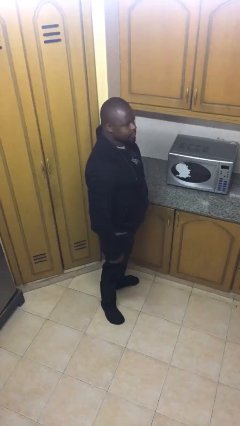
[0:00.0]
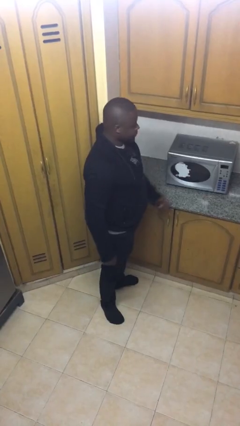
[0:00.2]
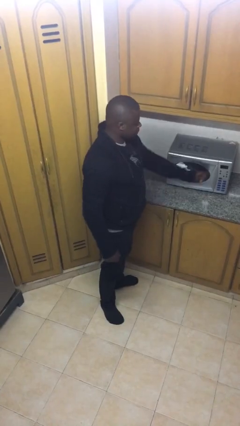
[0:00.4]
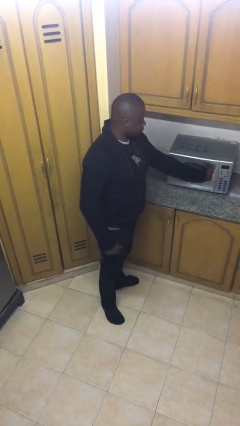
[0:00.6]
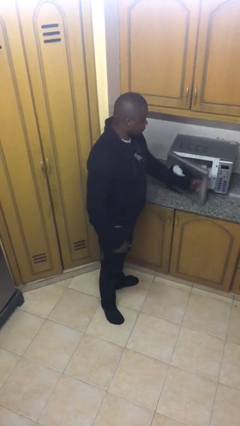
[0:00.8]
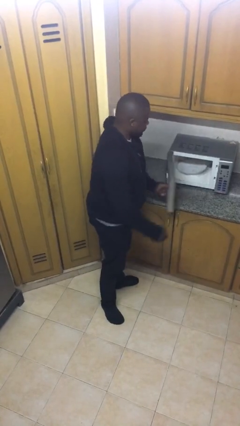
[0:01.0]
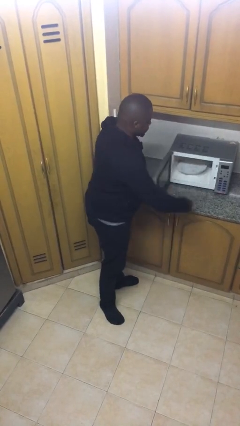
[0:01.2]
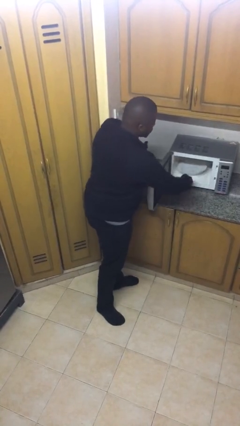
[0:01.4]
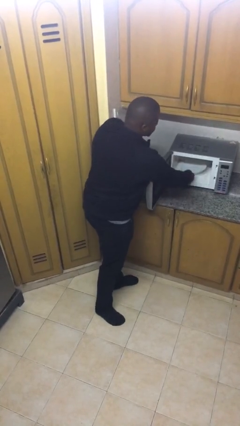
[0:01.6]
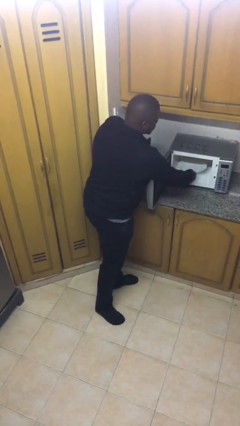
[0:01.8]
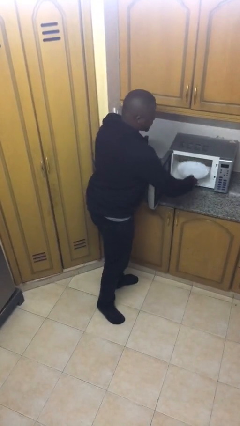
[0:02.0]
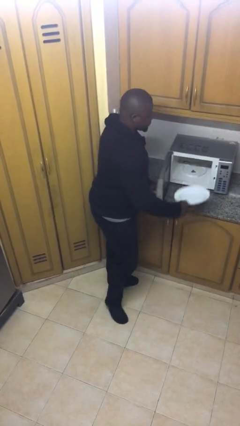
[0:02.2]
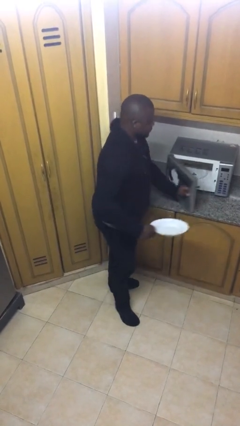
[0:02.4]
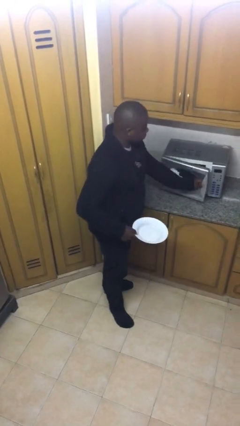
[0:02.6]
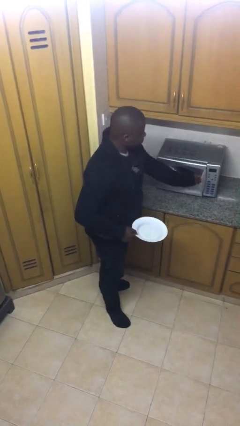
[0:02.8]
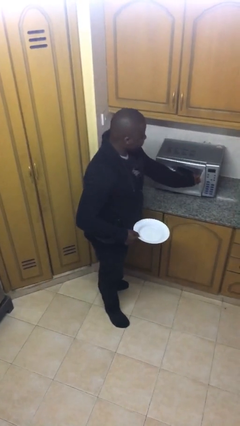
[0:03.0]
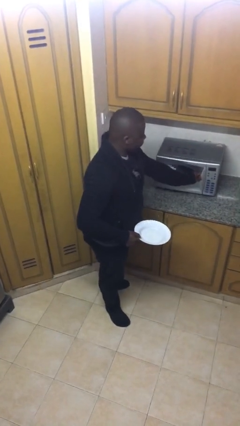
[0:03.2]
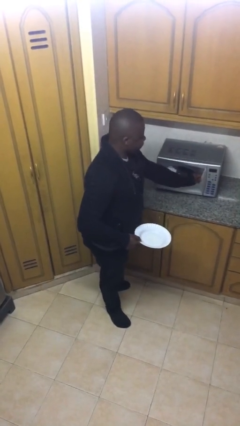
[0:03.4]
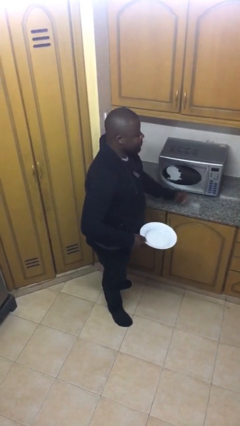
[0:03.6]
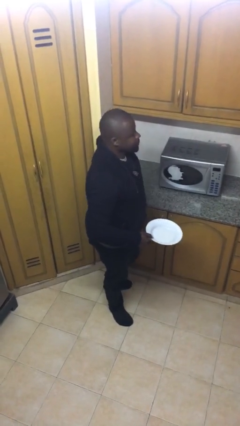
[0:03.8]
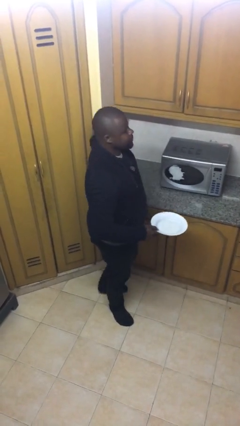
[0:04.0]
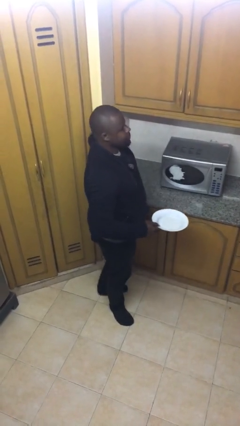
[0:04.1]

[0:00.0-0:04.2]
person takes object from microwave

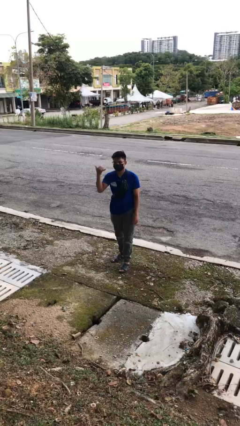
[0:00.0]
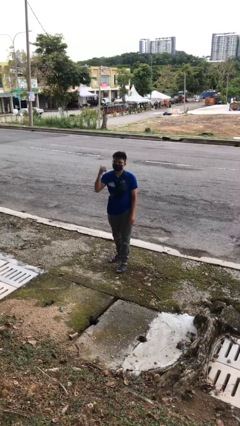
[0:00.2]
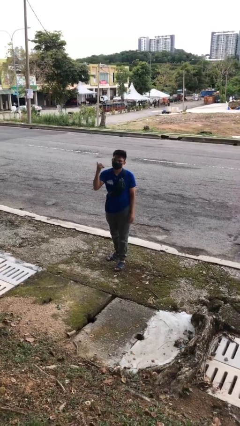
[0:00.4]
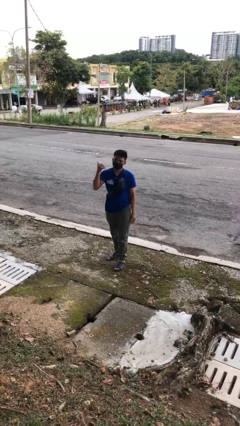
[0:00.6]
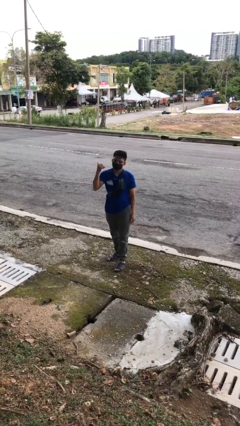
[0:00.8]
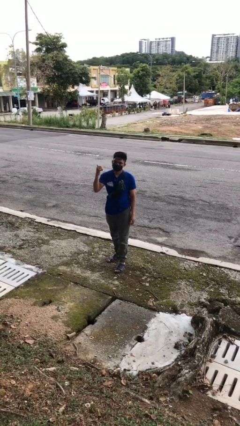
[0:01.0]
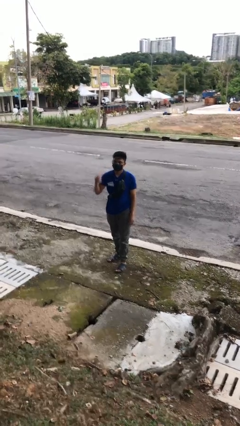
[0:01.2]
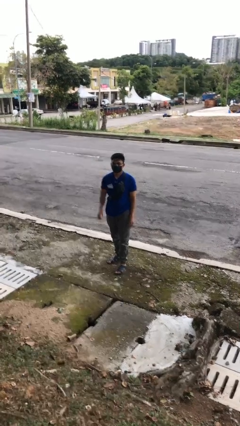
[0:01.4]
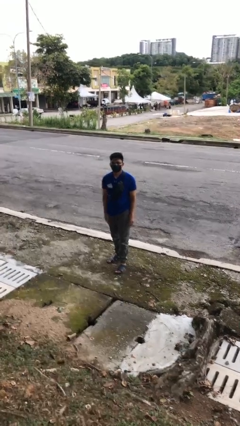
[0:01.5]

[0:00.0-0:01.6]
person gestures hang loose

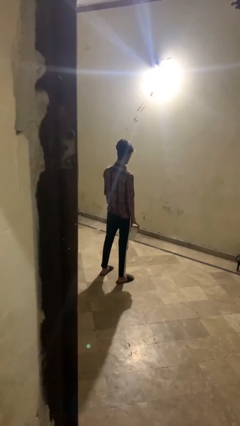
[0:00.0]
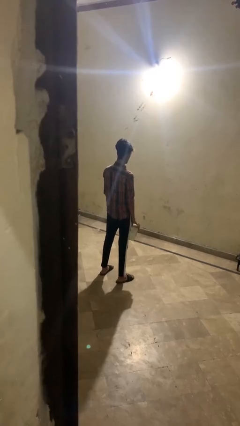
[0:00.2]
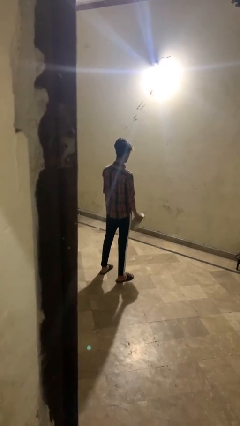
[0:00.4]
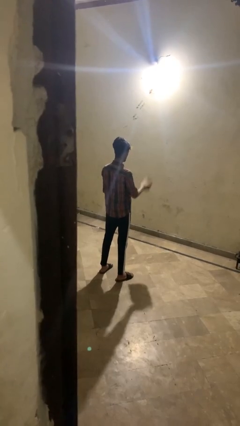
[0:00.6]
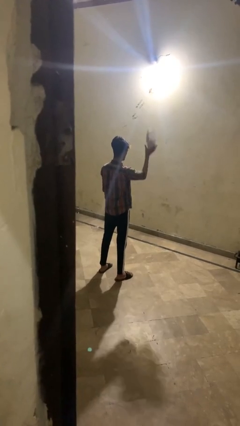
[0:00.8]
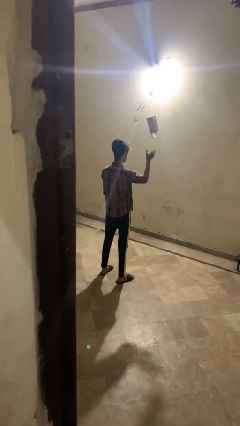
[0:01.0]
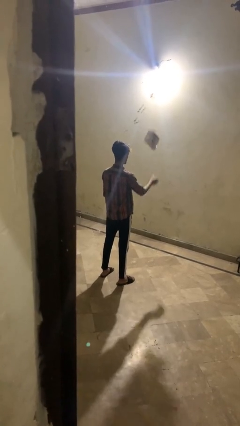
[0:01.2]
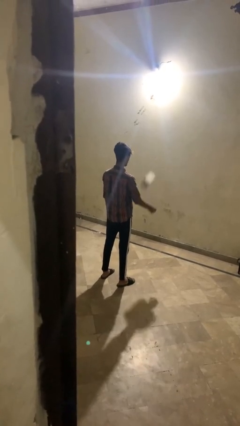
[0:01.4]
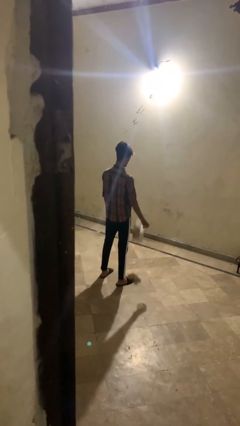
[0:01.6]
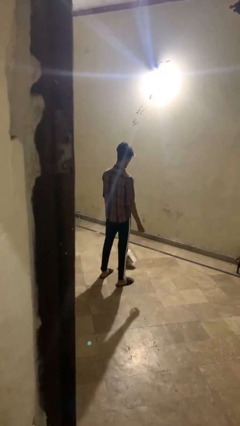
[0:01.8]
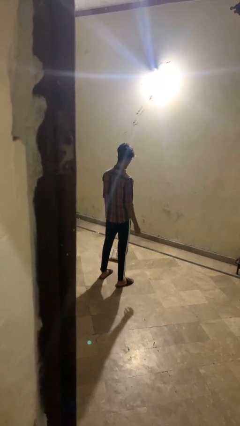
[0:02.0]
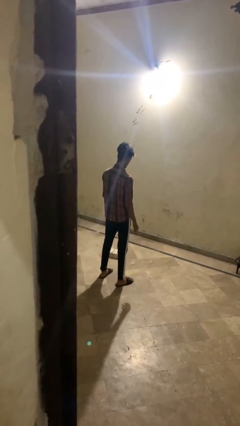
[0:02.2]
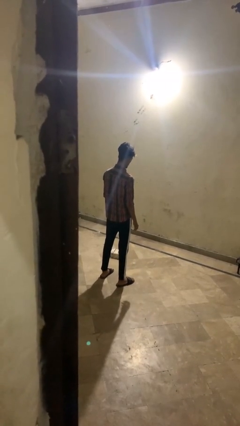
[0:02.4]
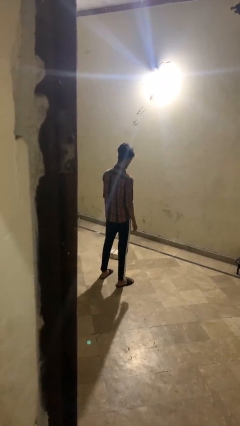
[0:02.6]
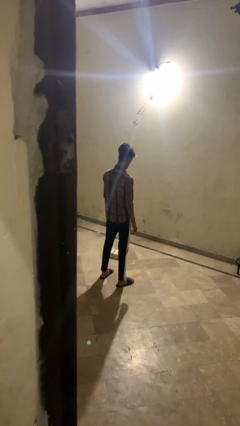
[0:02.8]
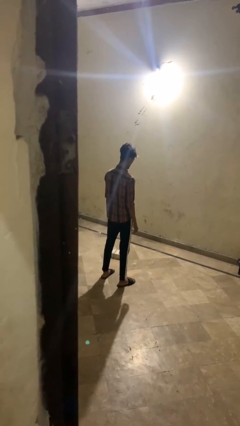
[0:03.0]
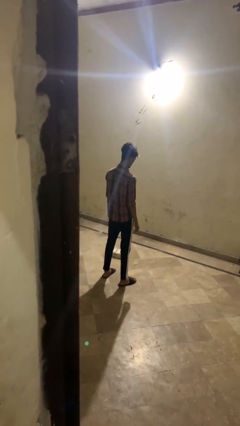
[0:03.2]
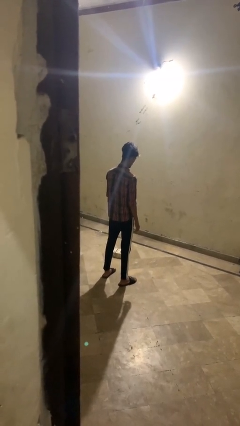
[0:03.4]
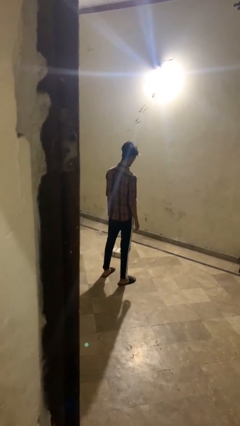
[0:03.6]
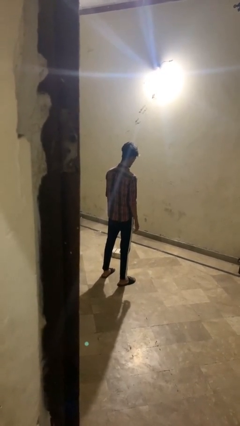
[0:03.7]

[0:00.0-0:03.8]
person throws object into air

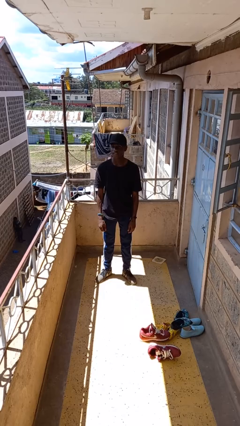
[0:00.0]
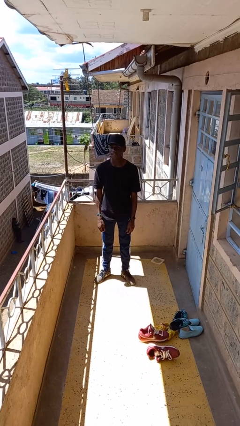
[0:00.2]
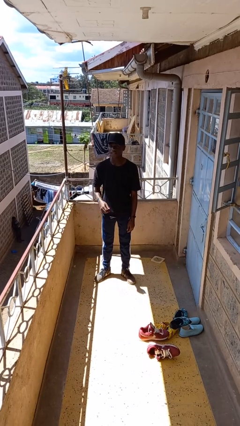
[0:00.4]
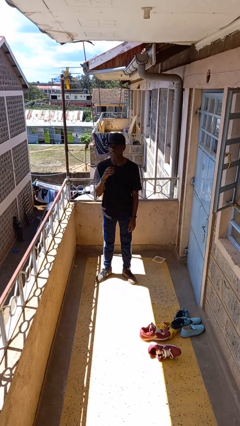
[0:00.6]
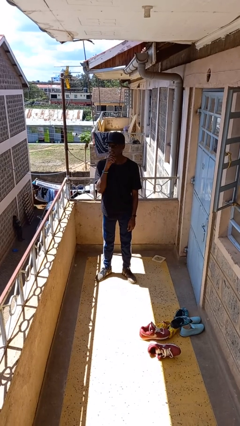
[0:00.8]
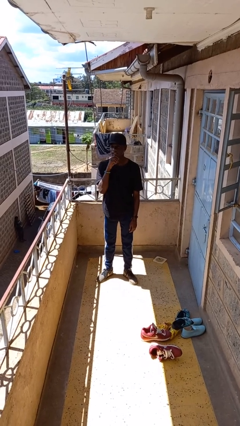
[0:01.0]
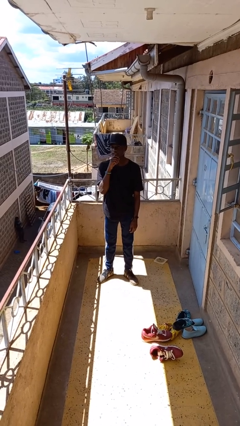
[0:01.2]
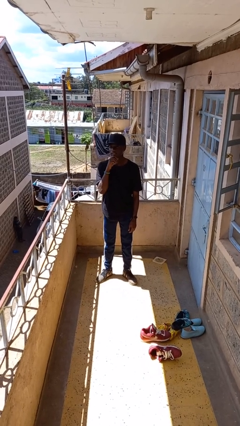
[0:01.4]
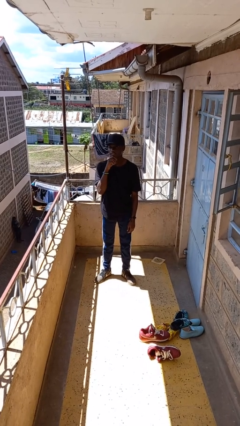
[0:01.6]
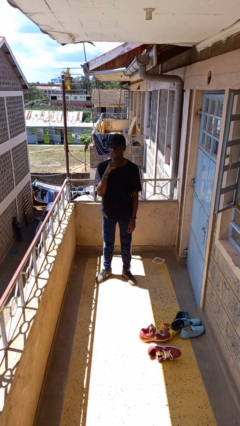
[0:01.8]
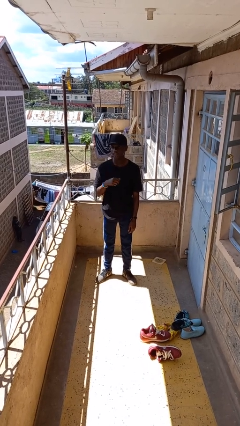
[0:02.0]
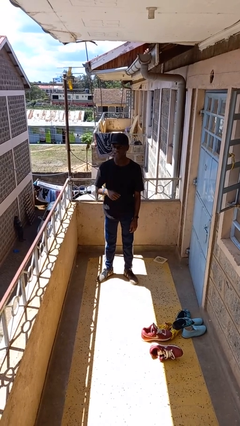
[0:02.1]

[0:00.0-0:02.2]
person strokes chin

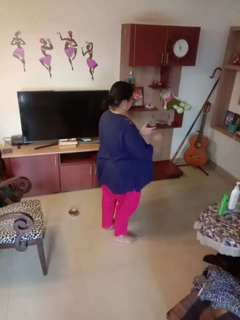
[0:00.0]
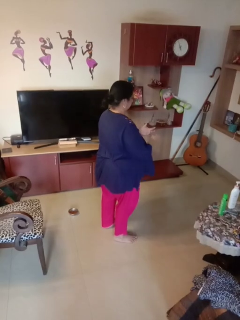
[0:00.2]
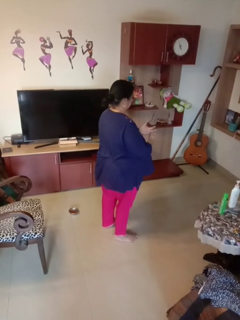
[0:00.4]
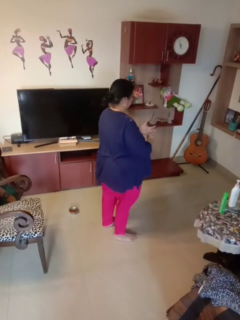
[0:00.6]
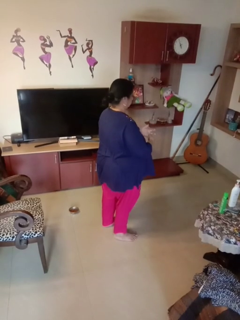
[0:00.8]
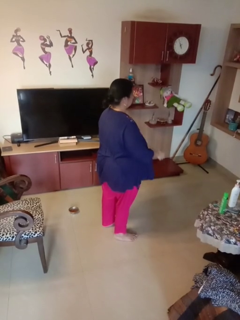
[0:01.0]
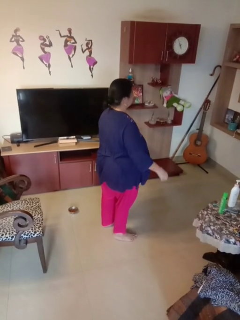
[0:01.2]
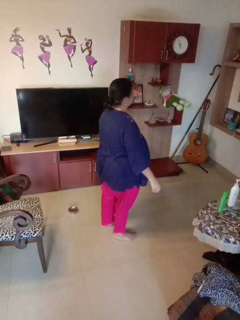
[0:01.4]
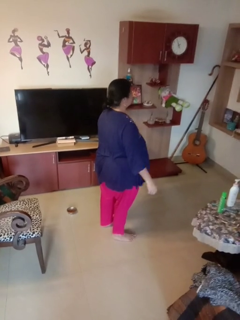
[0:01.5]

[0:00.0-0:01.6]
person puts on ring

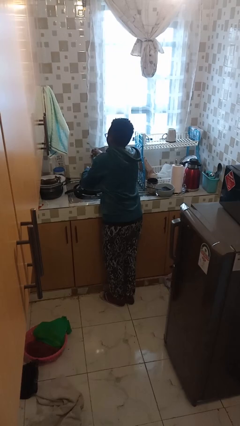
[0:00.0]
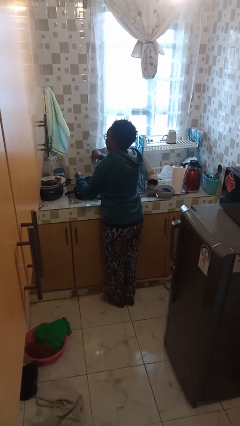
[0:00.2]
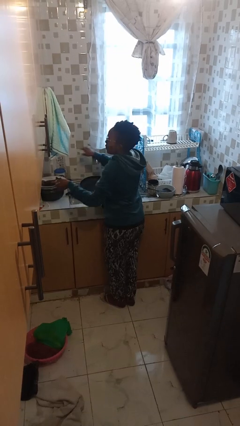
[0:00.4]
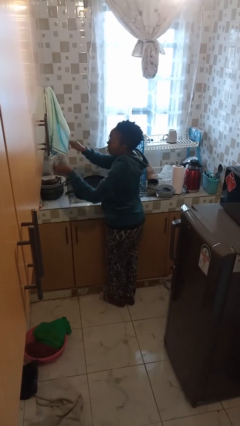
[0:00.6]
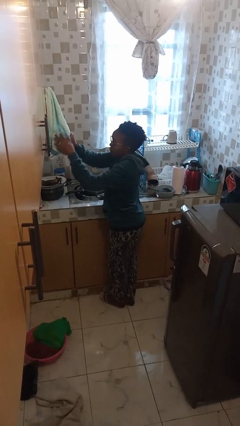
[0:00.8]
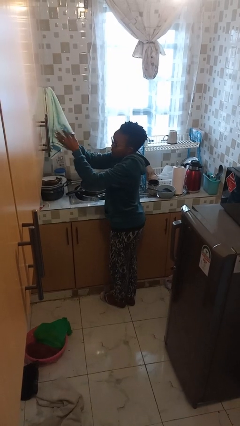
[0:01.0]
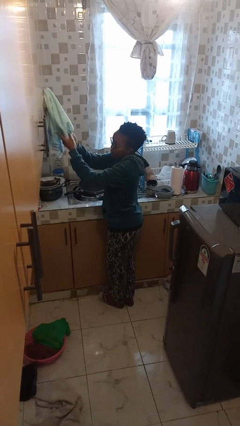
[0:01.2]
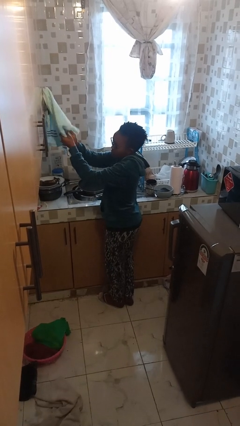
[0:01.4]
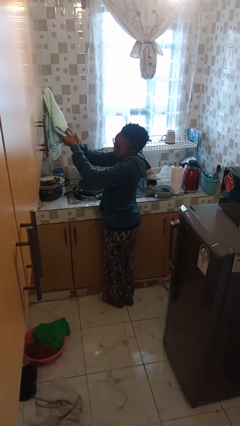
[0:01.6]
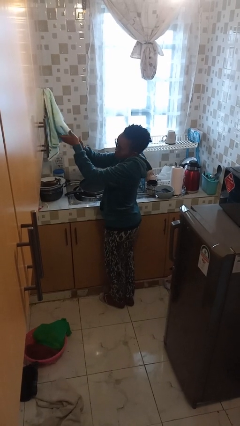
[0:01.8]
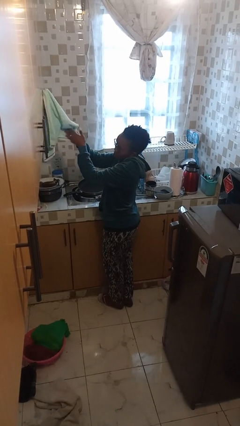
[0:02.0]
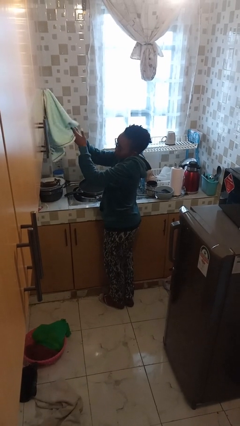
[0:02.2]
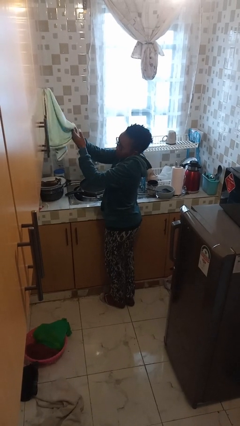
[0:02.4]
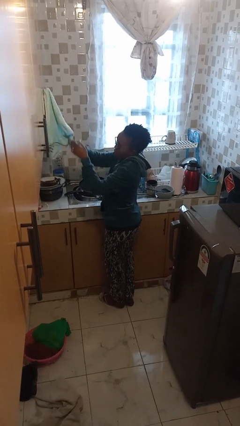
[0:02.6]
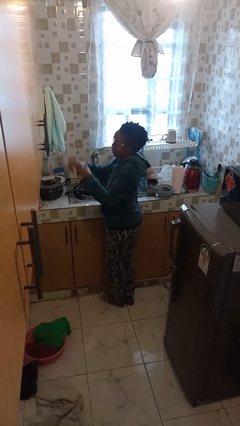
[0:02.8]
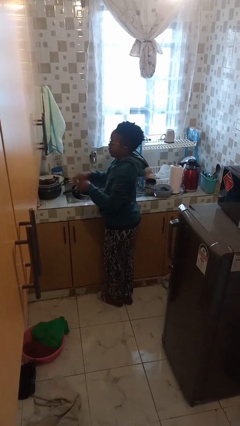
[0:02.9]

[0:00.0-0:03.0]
person dries hands with towel

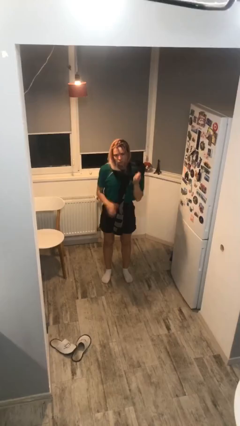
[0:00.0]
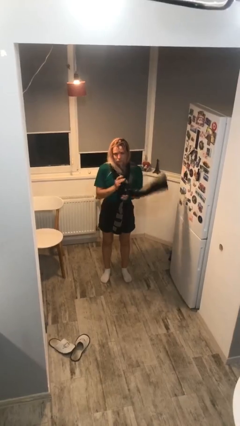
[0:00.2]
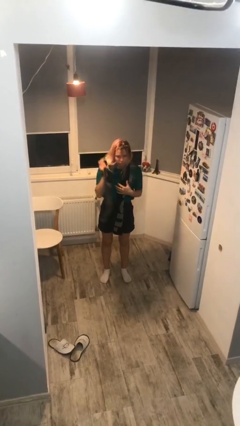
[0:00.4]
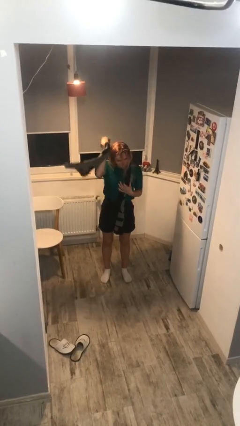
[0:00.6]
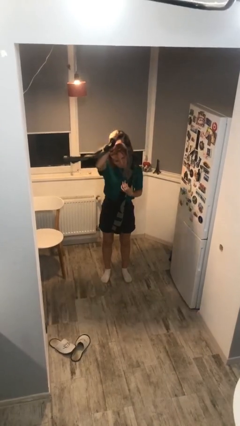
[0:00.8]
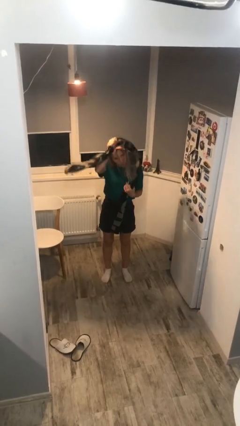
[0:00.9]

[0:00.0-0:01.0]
person takes off scarf

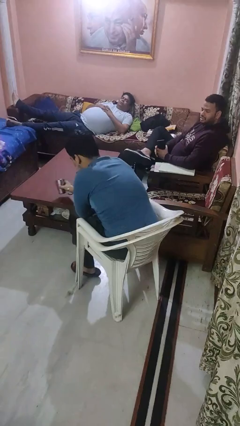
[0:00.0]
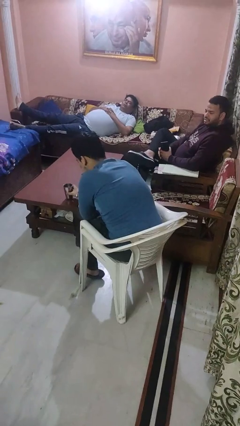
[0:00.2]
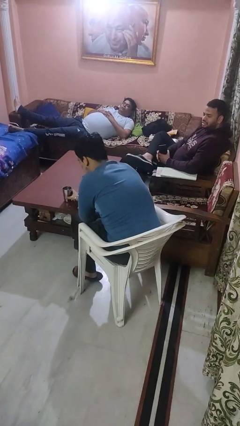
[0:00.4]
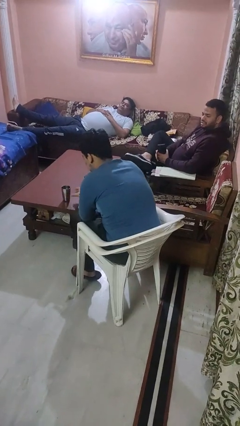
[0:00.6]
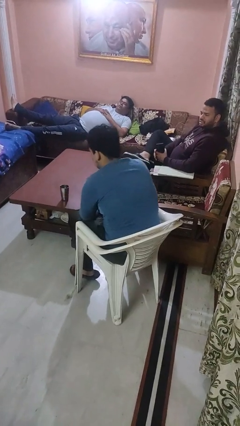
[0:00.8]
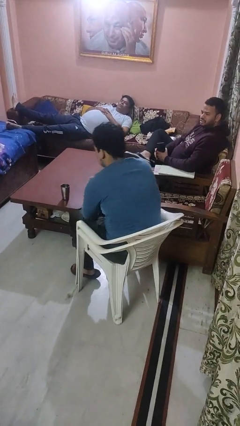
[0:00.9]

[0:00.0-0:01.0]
person sets upright glass
